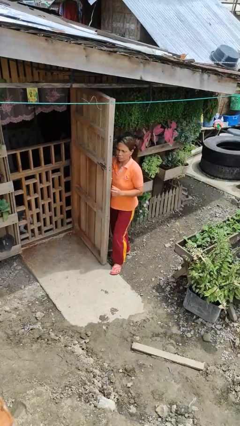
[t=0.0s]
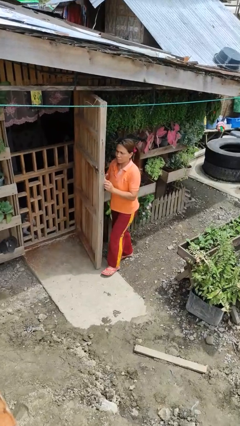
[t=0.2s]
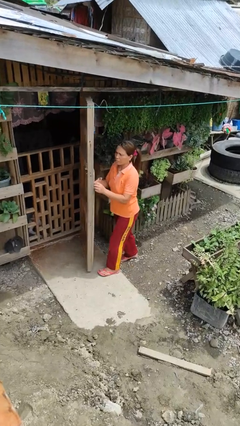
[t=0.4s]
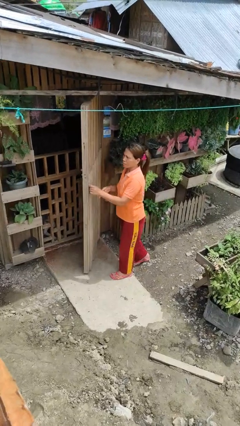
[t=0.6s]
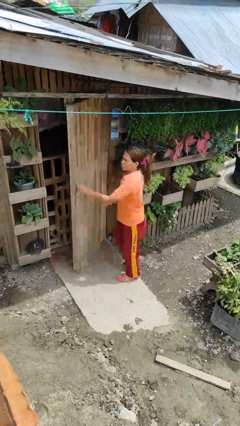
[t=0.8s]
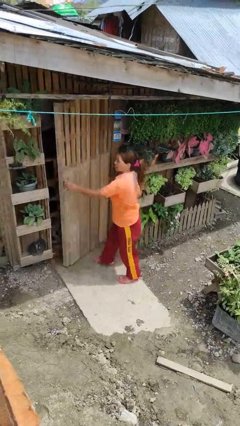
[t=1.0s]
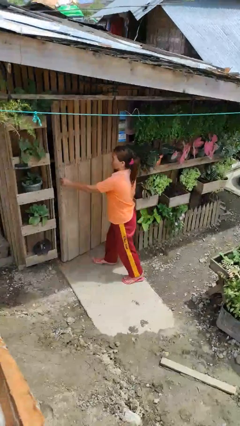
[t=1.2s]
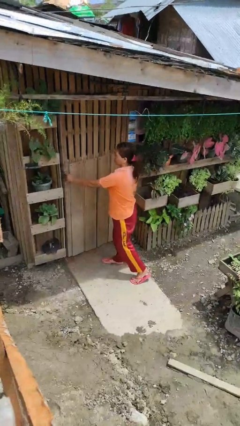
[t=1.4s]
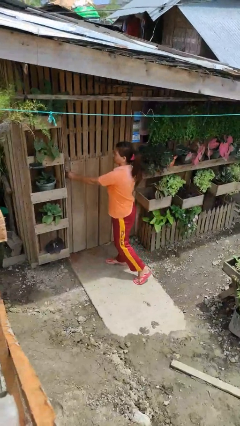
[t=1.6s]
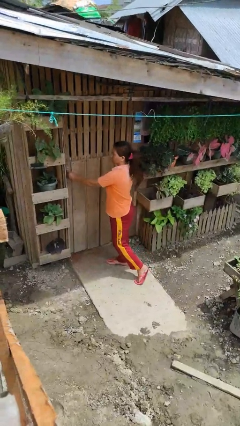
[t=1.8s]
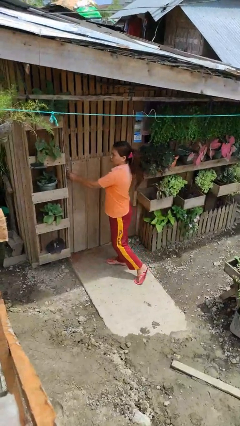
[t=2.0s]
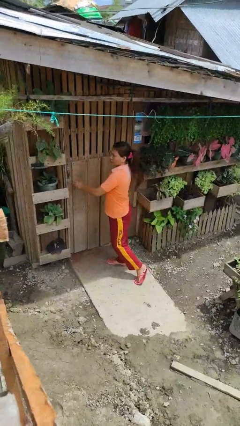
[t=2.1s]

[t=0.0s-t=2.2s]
person closes facility door

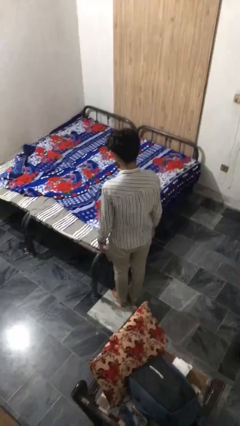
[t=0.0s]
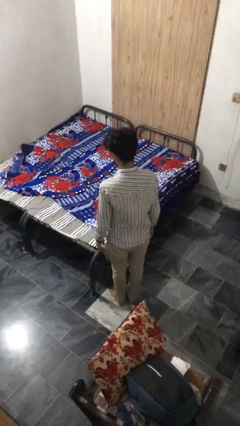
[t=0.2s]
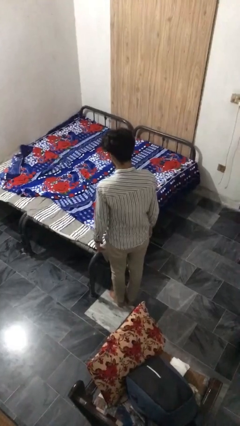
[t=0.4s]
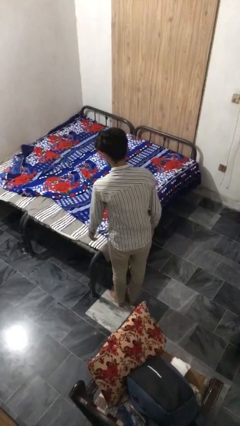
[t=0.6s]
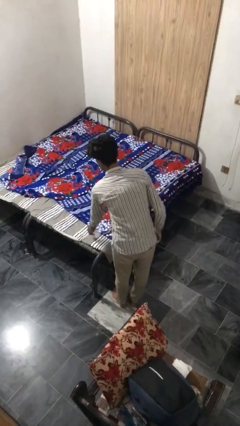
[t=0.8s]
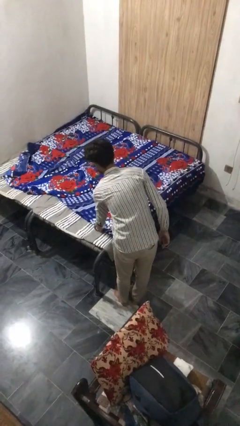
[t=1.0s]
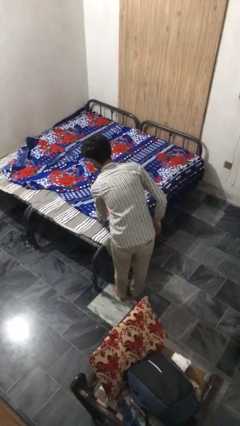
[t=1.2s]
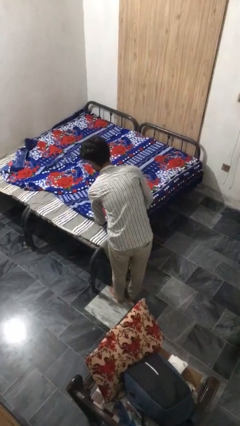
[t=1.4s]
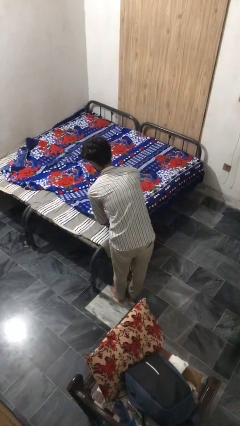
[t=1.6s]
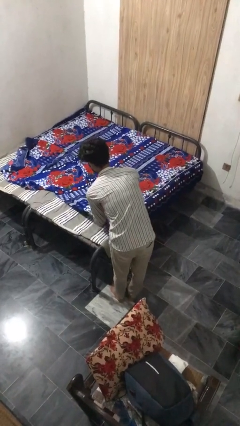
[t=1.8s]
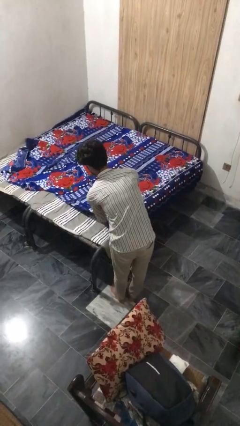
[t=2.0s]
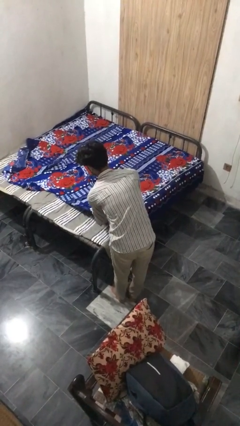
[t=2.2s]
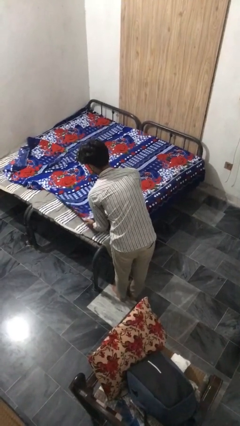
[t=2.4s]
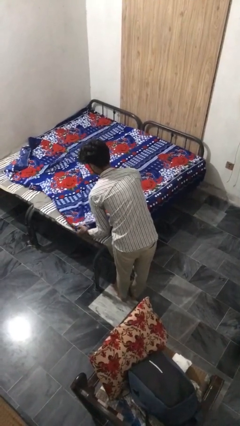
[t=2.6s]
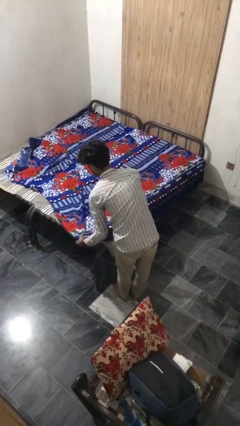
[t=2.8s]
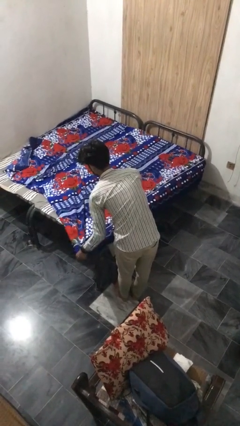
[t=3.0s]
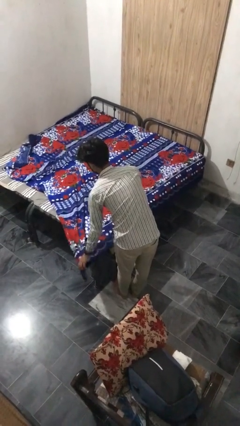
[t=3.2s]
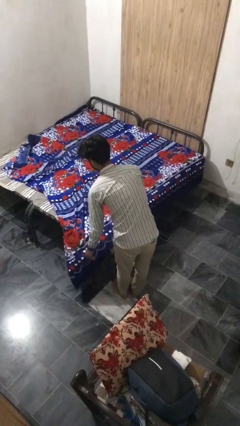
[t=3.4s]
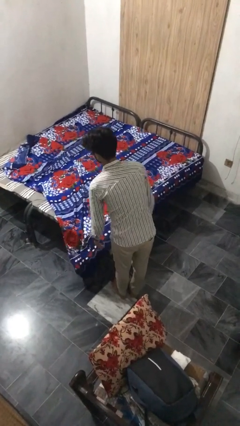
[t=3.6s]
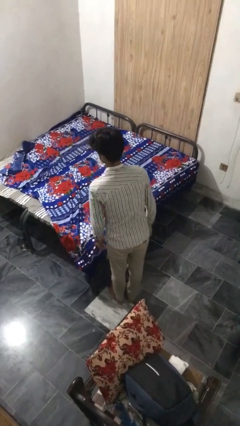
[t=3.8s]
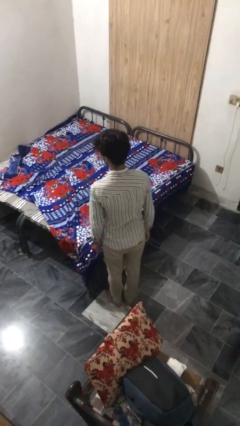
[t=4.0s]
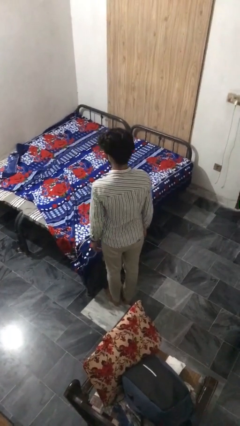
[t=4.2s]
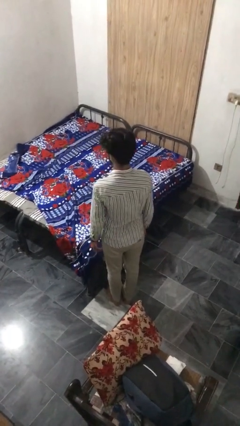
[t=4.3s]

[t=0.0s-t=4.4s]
person makes bed

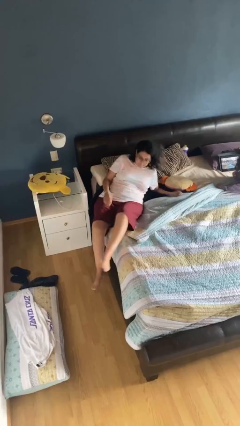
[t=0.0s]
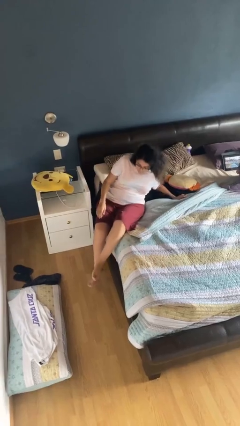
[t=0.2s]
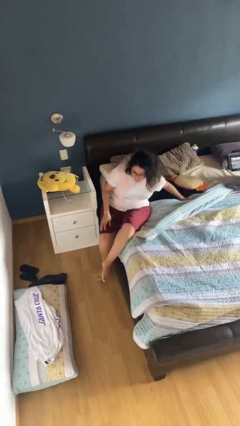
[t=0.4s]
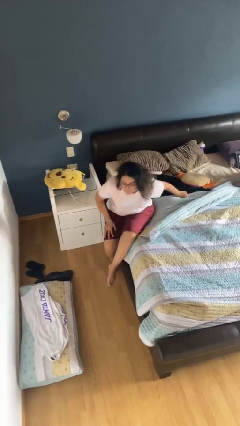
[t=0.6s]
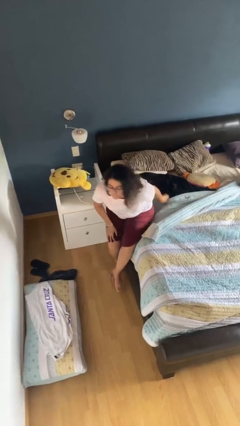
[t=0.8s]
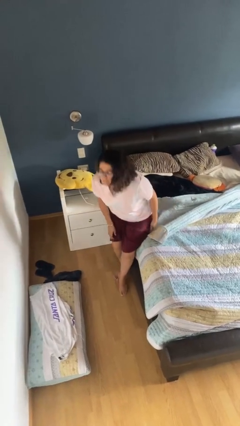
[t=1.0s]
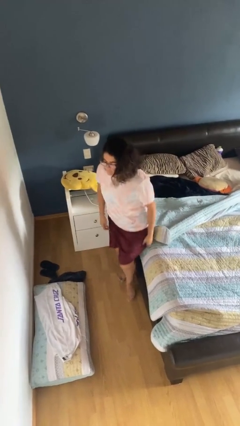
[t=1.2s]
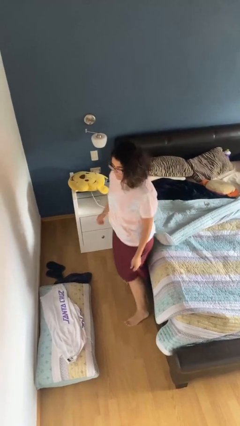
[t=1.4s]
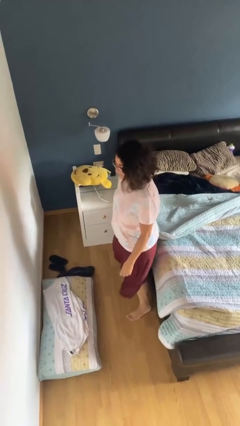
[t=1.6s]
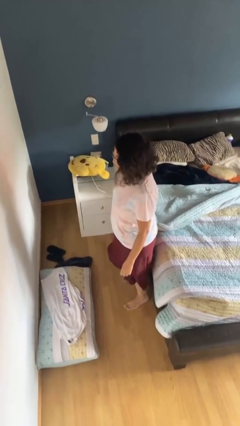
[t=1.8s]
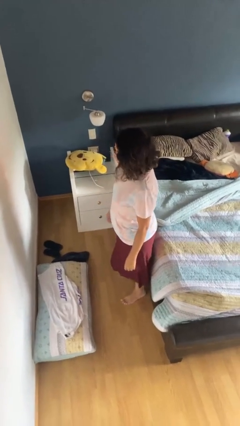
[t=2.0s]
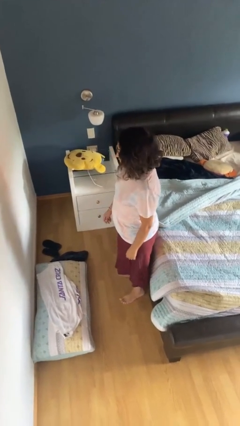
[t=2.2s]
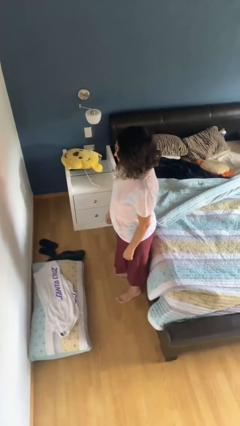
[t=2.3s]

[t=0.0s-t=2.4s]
person stands up

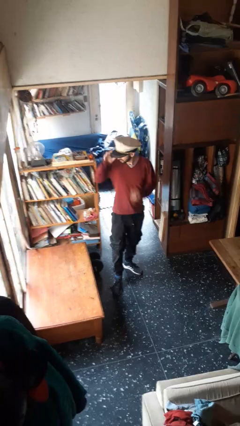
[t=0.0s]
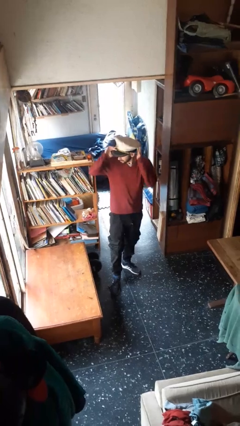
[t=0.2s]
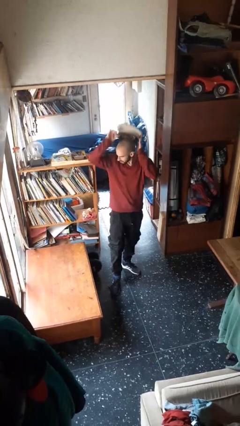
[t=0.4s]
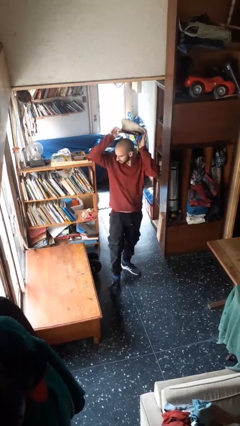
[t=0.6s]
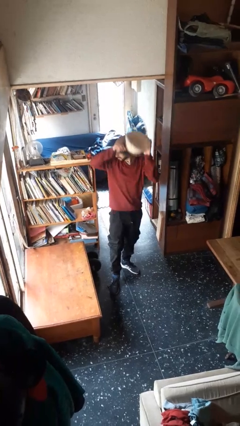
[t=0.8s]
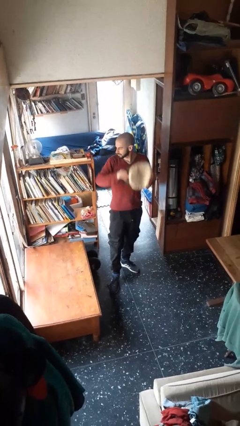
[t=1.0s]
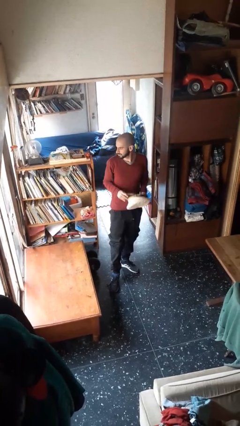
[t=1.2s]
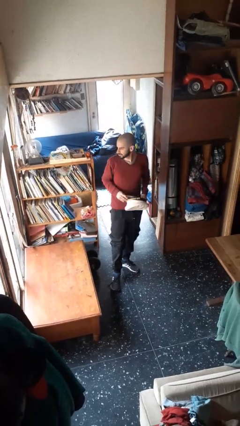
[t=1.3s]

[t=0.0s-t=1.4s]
person takes off hat

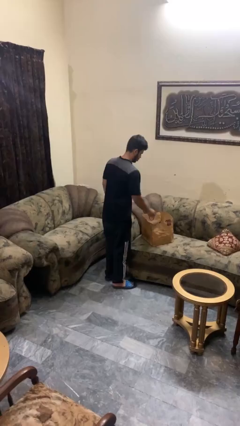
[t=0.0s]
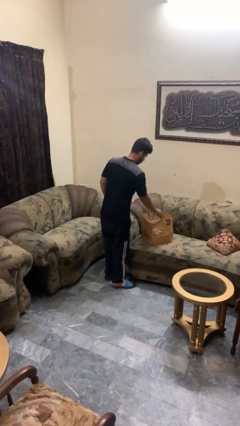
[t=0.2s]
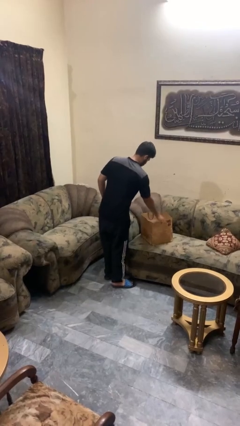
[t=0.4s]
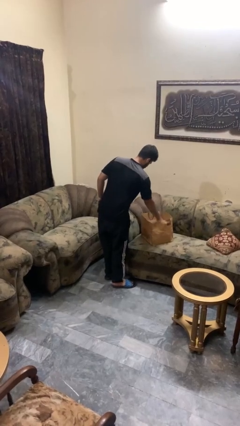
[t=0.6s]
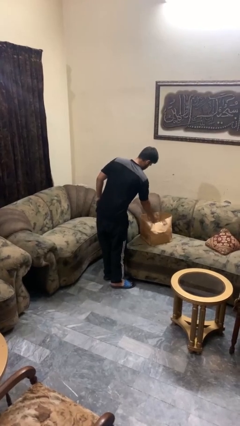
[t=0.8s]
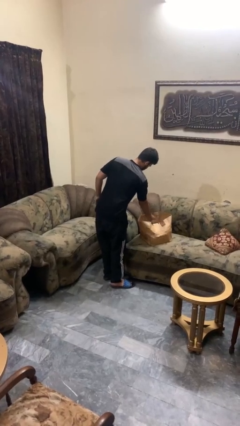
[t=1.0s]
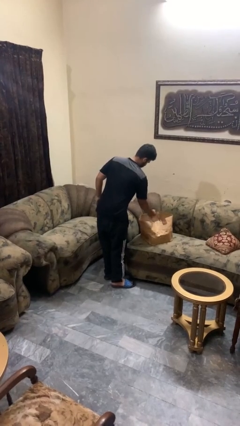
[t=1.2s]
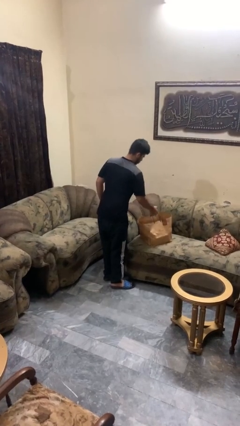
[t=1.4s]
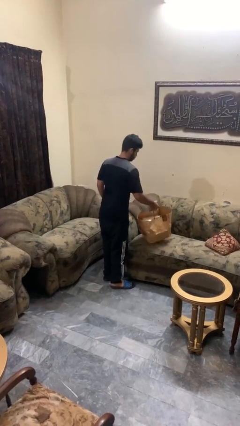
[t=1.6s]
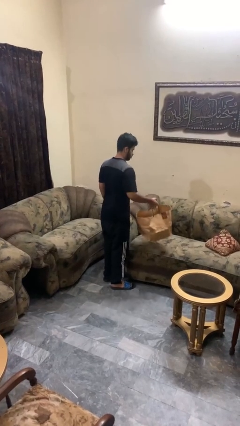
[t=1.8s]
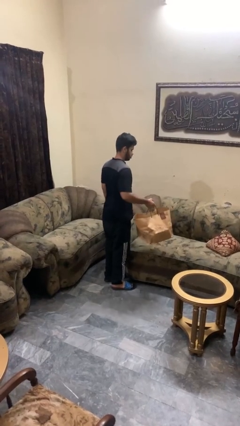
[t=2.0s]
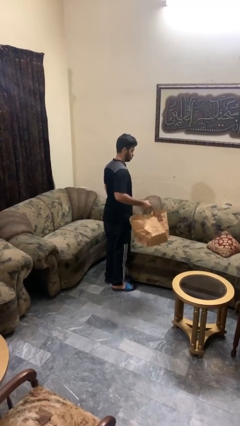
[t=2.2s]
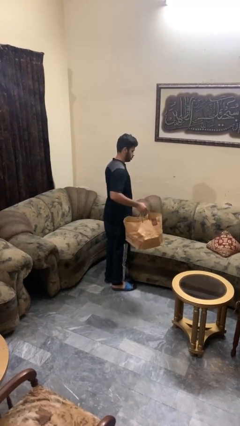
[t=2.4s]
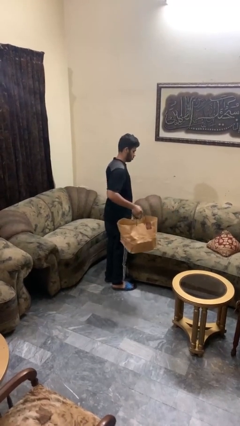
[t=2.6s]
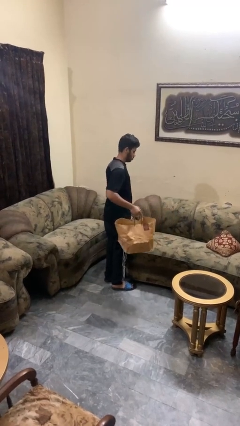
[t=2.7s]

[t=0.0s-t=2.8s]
person picks up object from couch

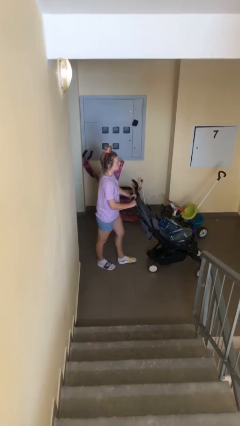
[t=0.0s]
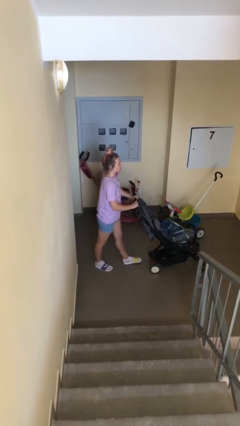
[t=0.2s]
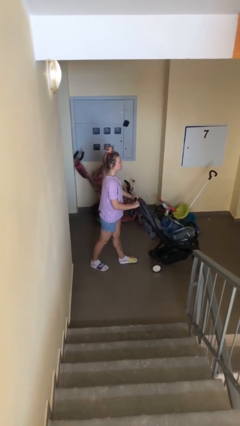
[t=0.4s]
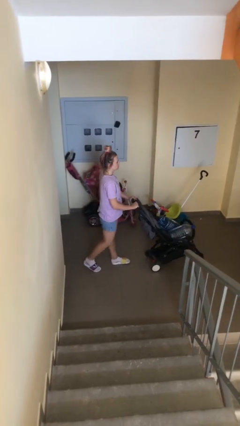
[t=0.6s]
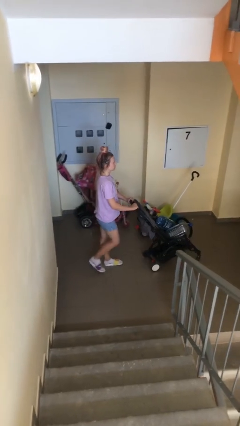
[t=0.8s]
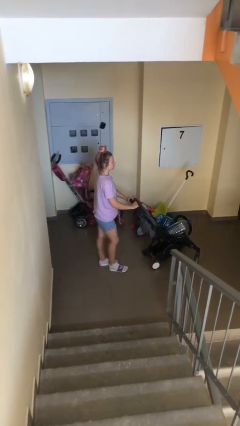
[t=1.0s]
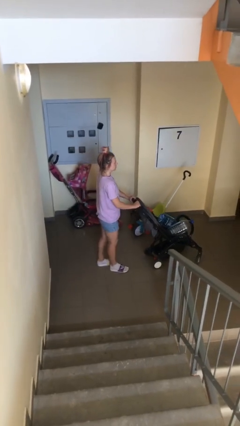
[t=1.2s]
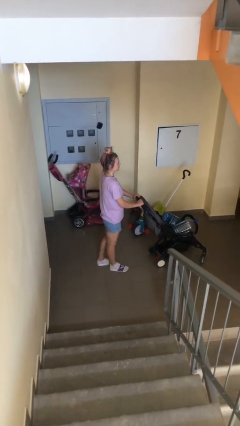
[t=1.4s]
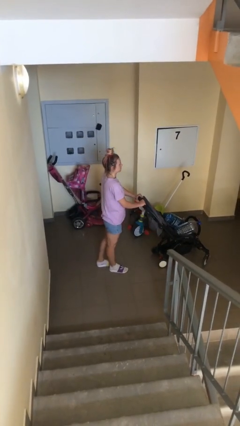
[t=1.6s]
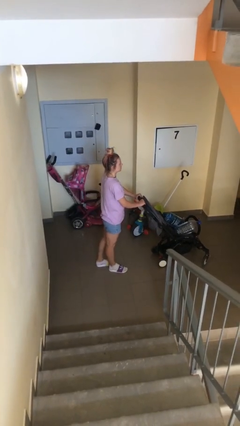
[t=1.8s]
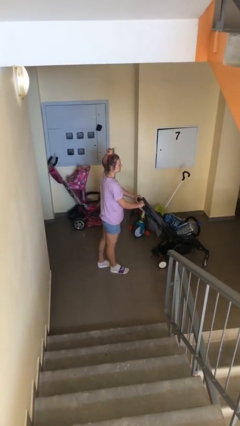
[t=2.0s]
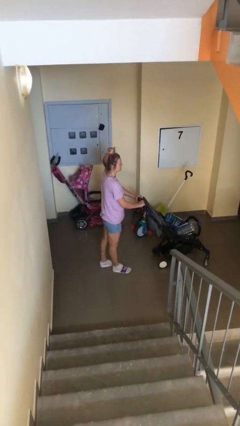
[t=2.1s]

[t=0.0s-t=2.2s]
person pushes wheeled cart

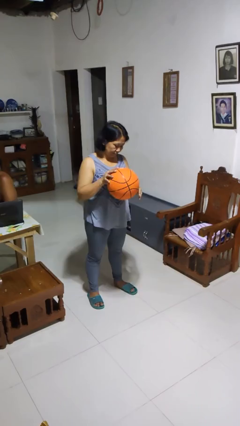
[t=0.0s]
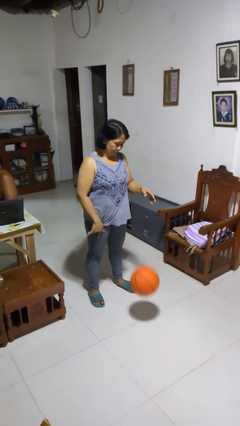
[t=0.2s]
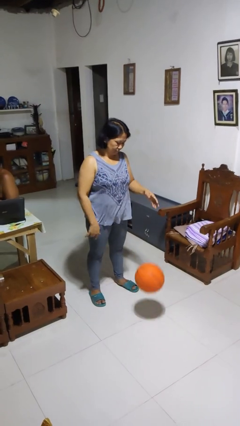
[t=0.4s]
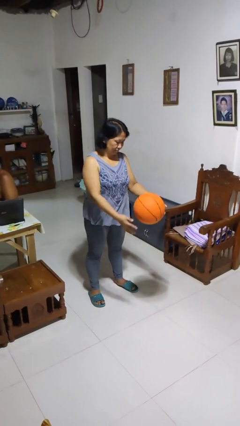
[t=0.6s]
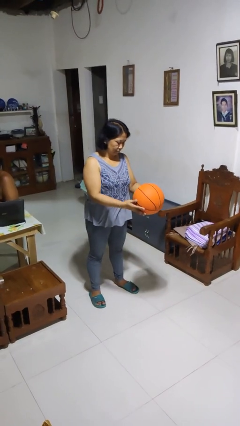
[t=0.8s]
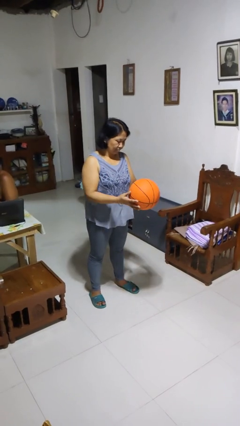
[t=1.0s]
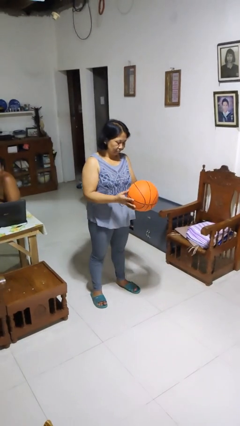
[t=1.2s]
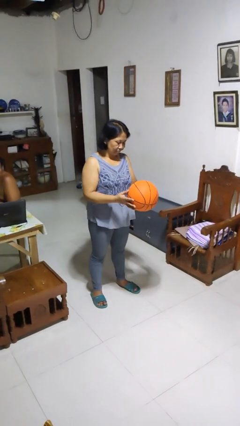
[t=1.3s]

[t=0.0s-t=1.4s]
person bounces ball on floor

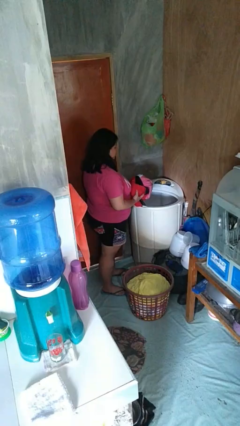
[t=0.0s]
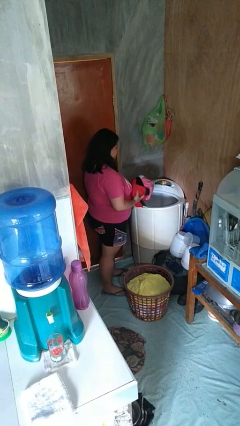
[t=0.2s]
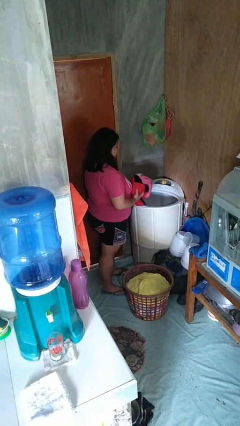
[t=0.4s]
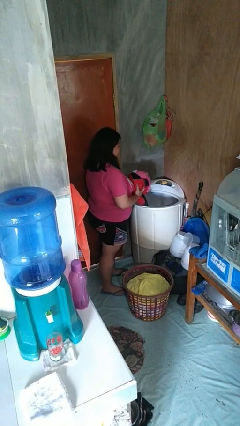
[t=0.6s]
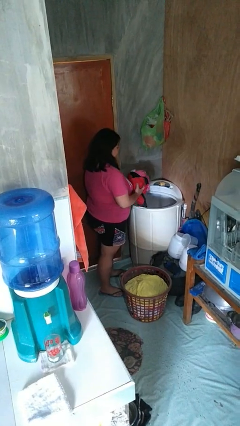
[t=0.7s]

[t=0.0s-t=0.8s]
person loads clotheswasher
